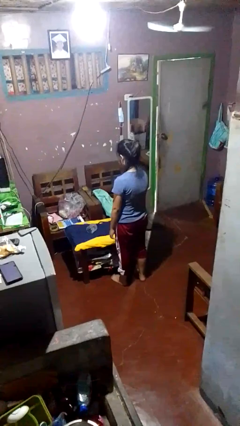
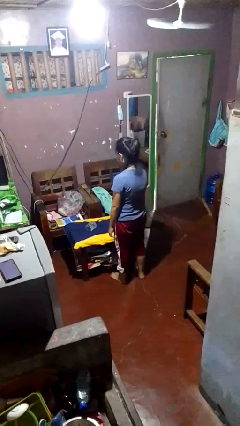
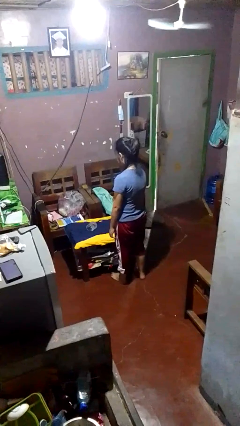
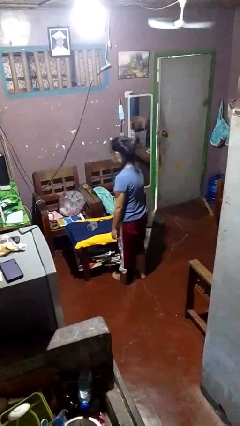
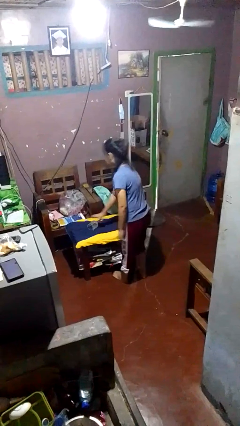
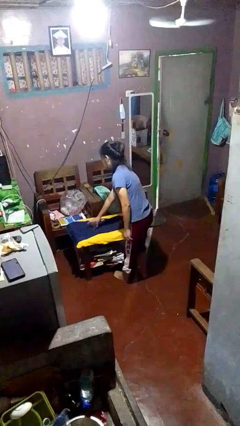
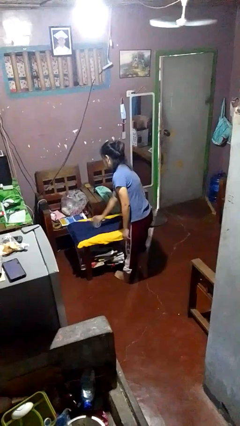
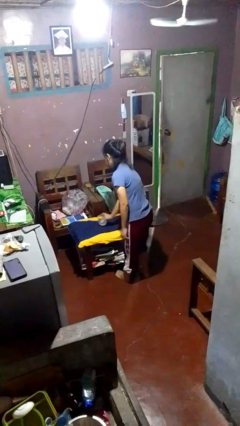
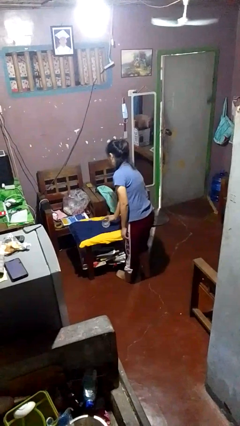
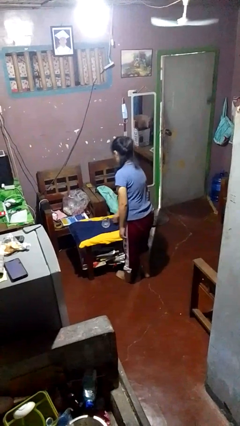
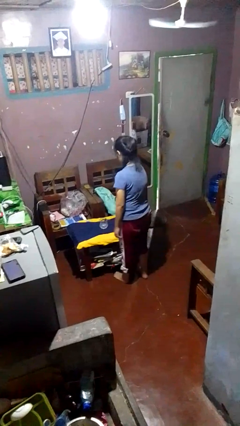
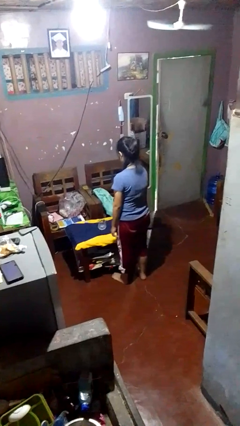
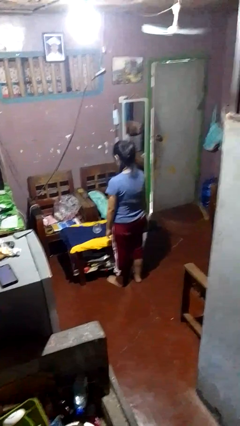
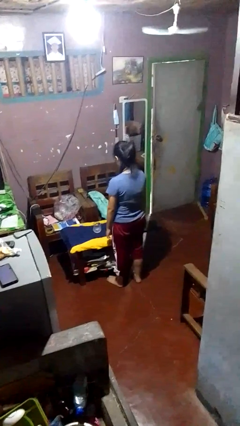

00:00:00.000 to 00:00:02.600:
person sets upright glass

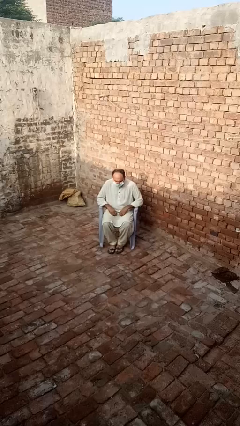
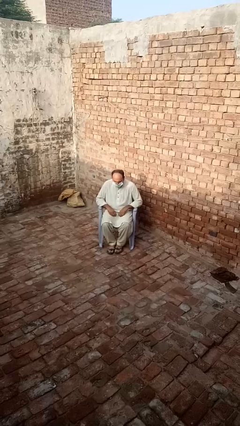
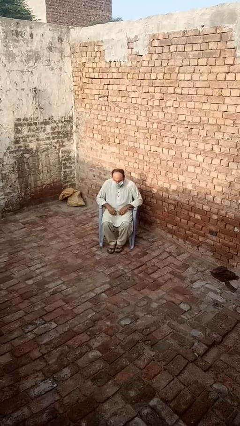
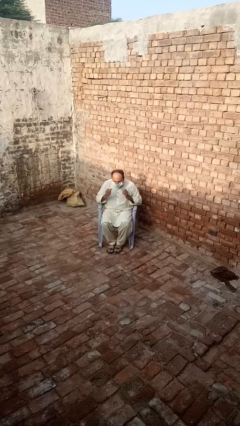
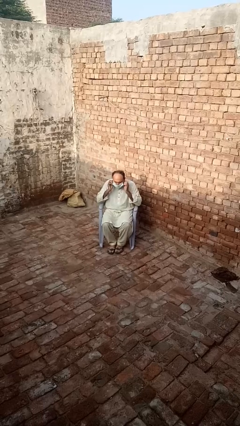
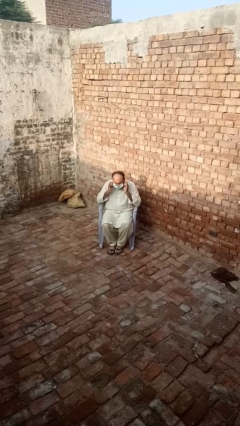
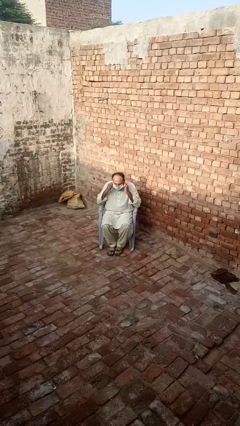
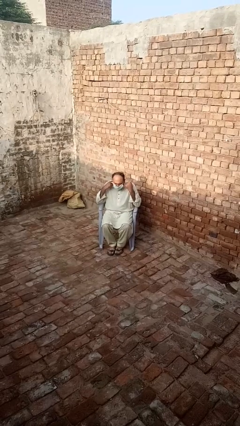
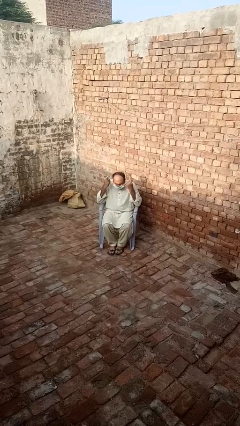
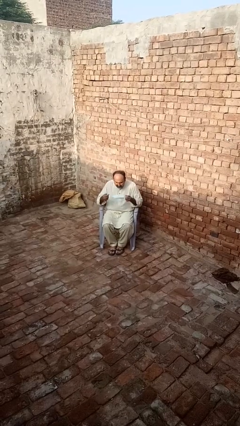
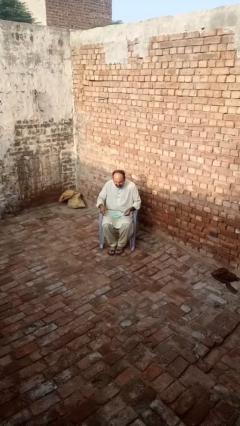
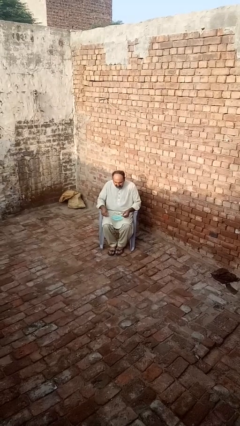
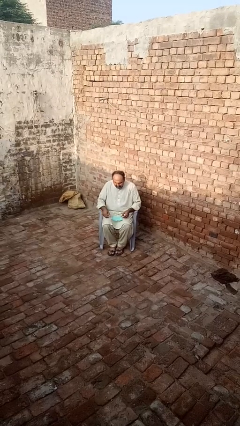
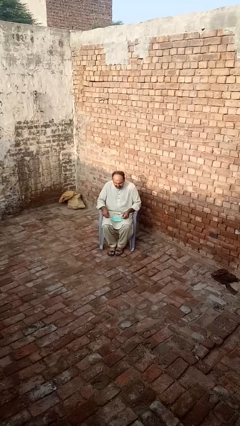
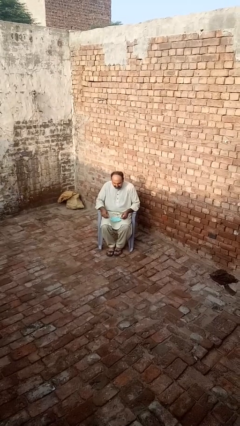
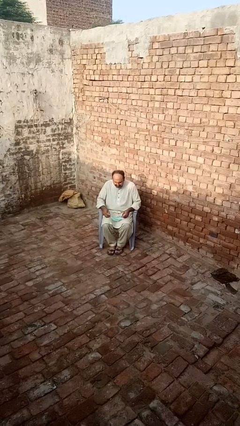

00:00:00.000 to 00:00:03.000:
person takes off facemask

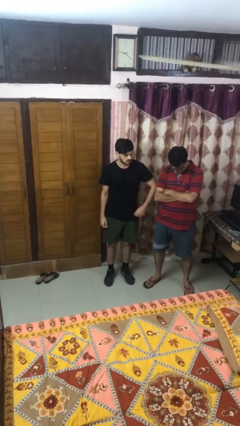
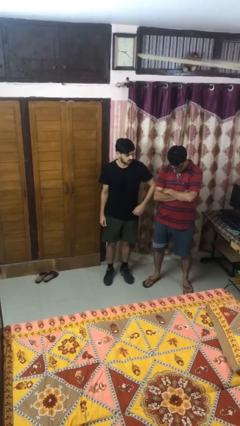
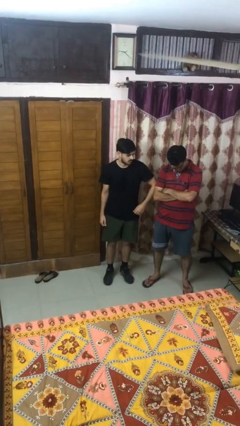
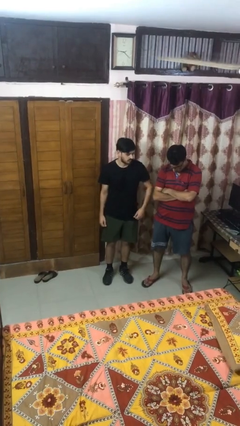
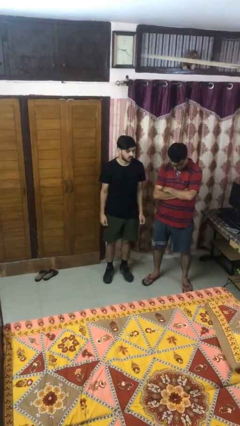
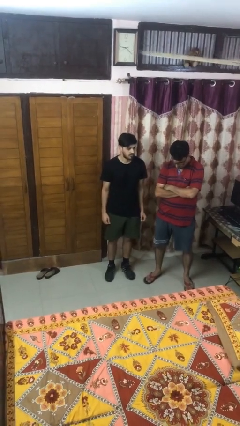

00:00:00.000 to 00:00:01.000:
person nudges person with elbow

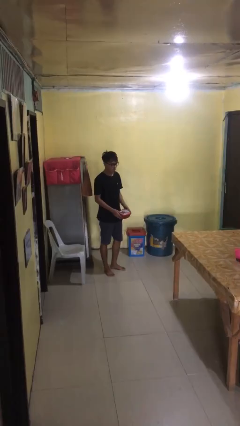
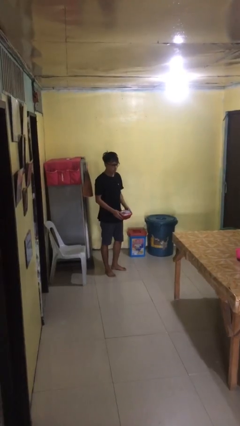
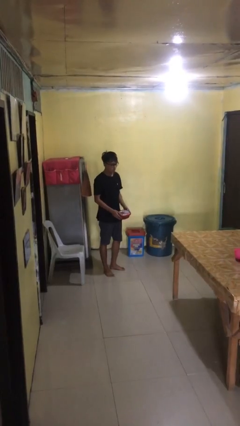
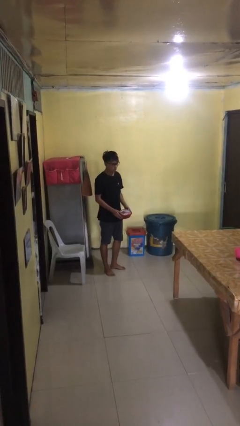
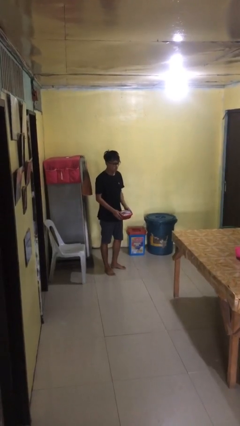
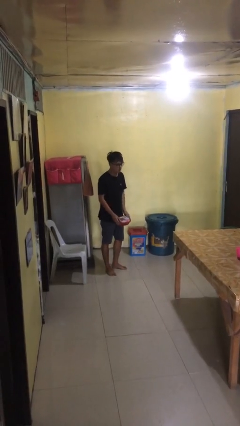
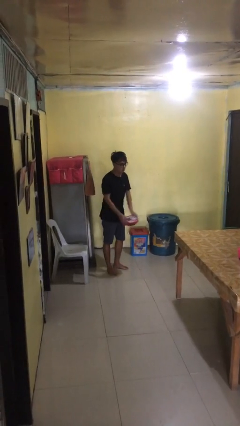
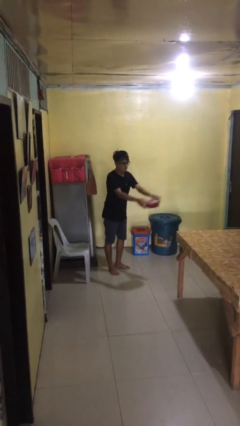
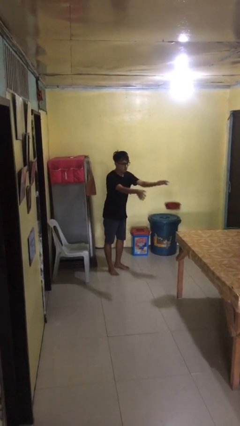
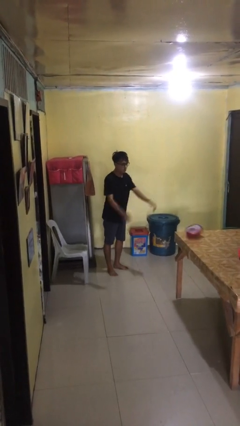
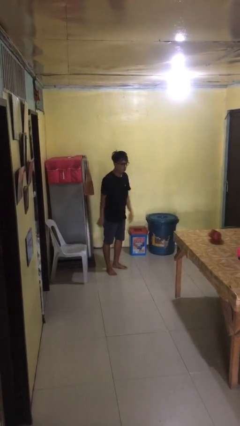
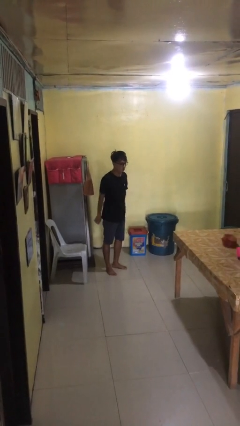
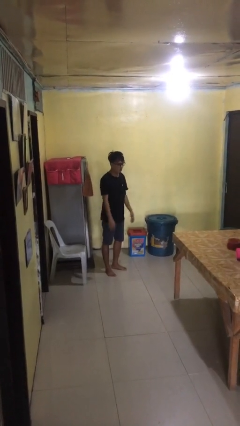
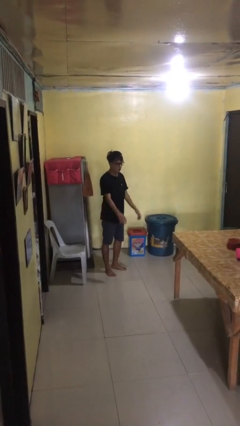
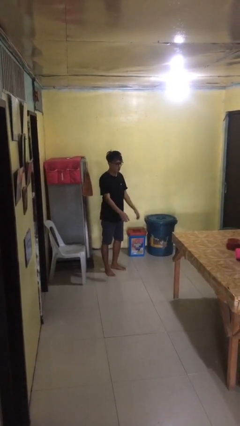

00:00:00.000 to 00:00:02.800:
person throws object on table

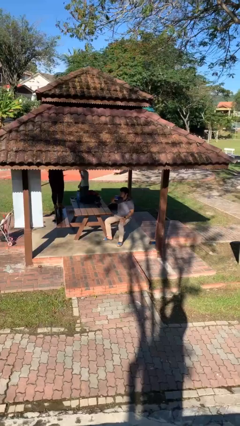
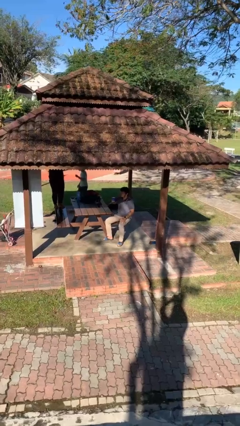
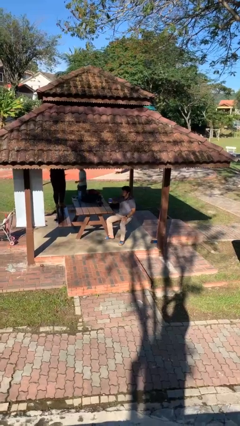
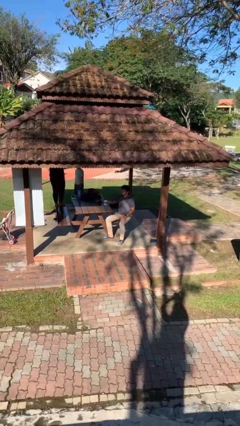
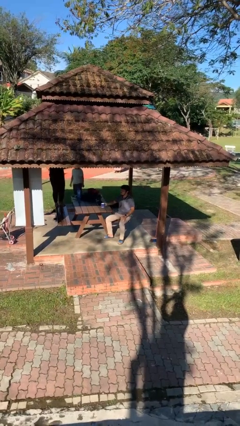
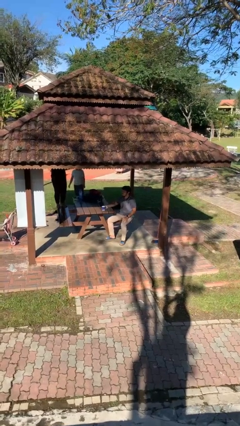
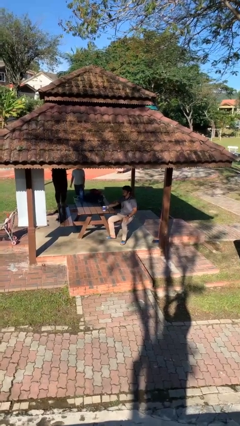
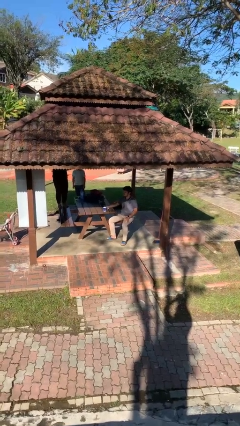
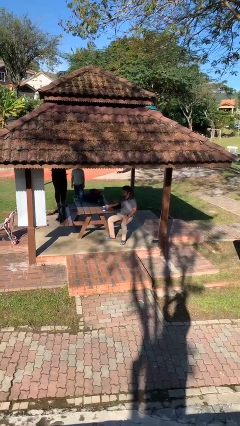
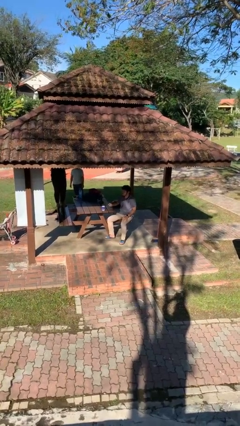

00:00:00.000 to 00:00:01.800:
person puts down object on table

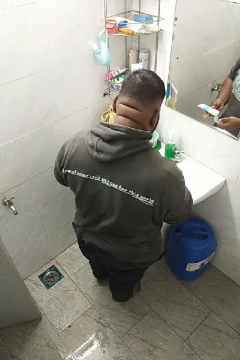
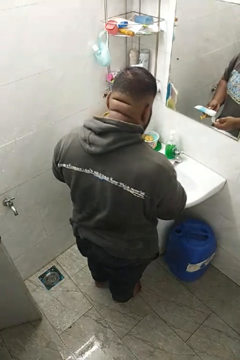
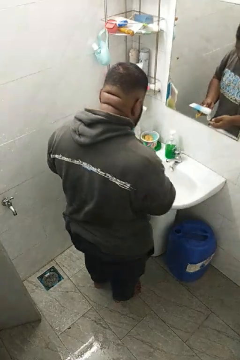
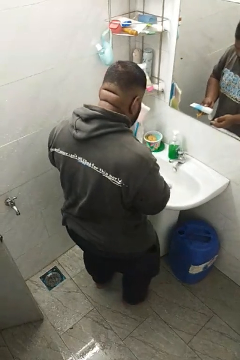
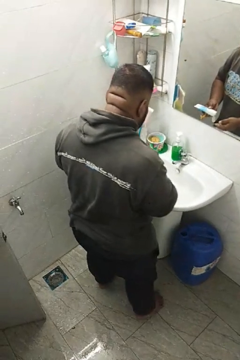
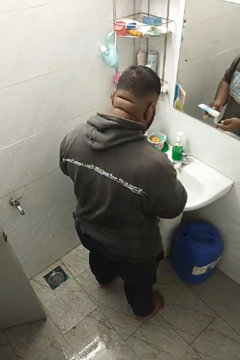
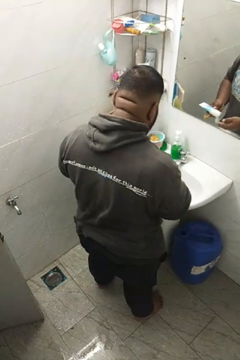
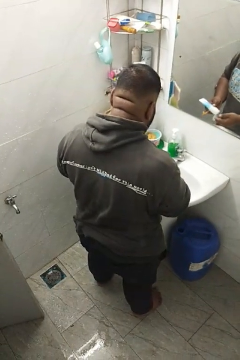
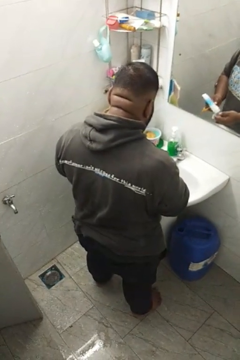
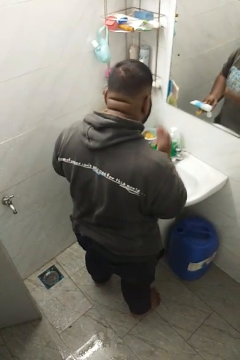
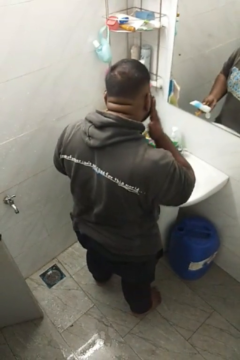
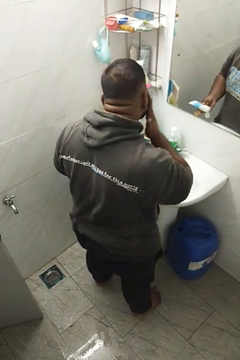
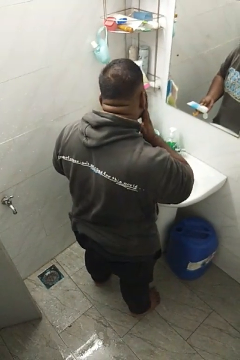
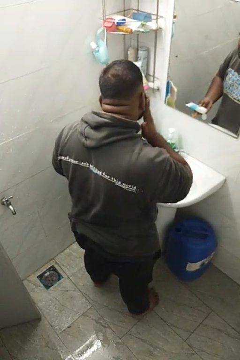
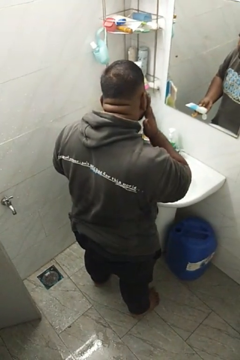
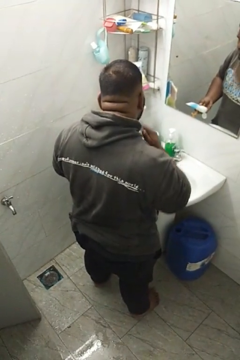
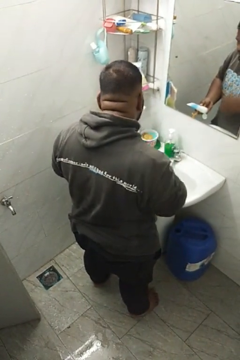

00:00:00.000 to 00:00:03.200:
person applies shaving cream

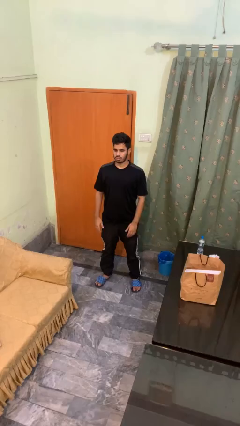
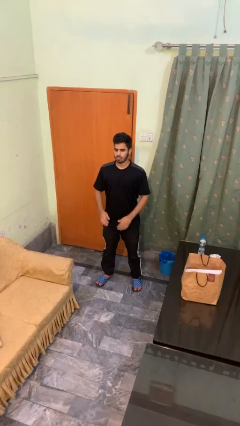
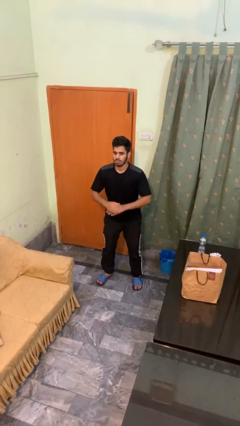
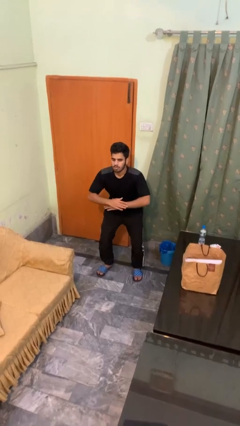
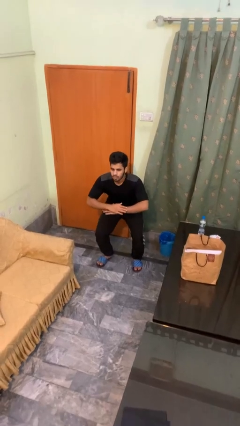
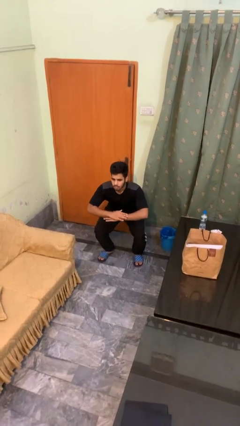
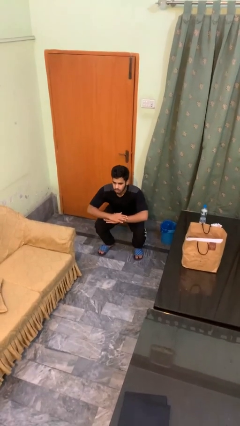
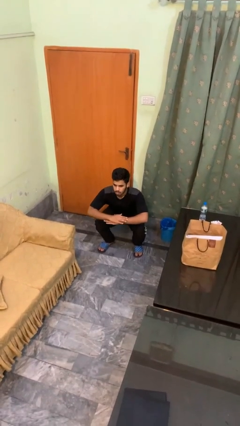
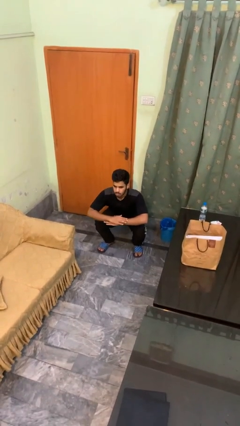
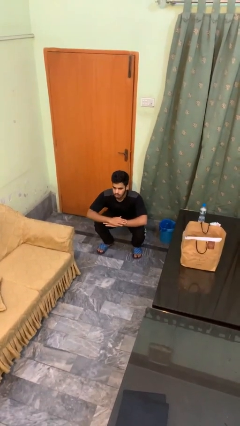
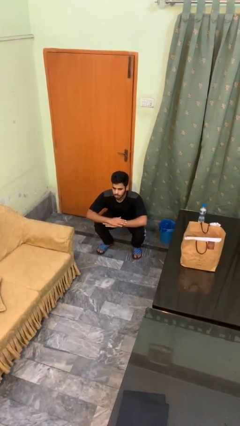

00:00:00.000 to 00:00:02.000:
person squats

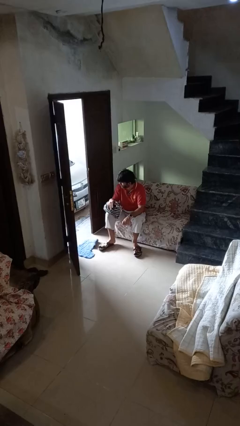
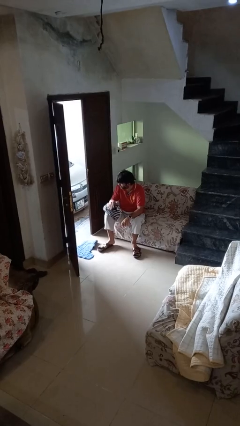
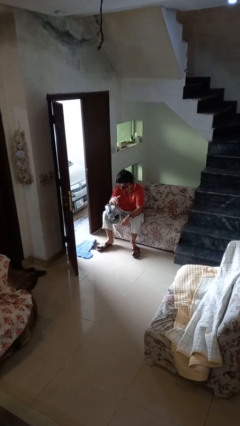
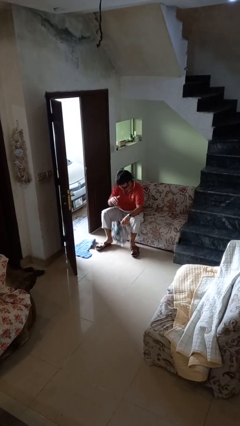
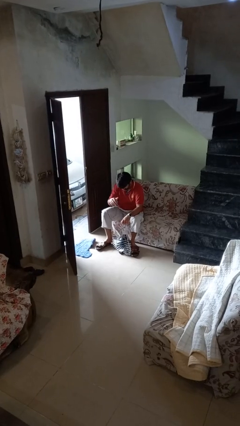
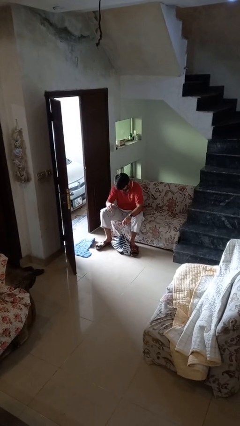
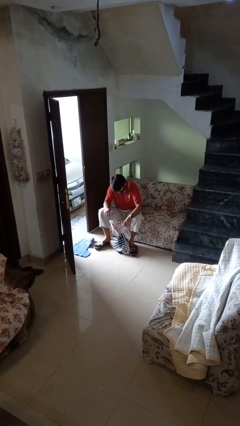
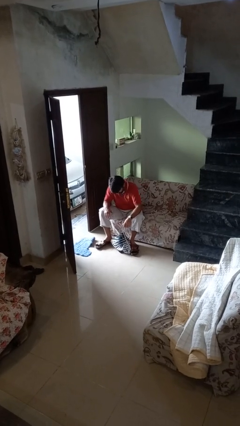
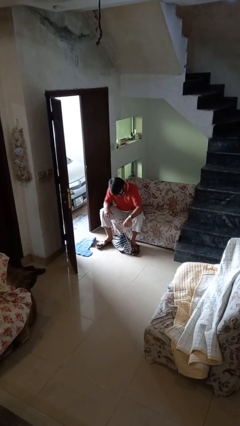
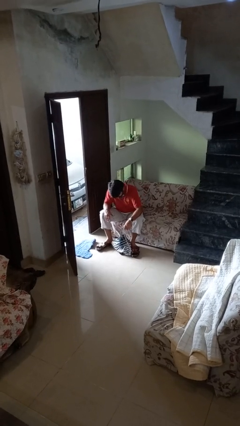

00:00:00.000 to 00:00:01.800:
person drops object
